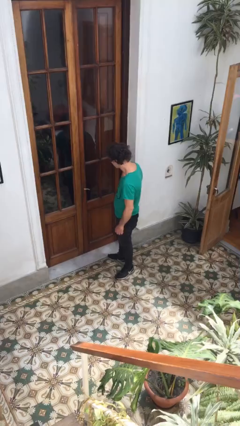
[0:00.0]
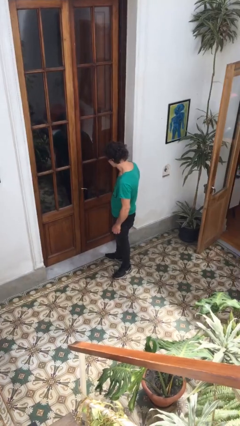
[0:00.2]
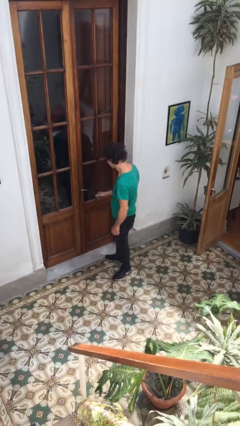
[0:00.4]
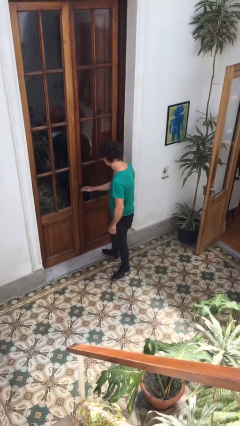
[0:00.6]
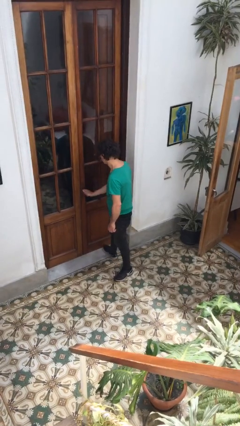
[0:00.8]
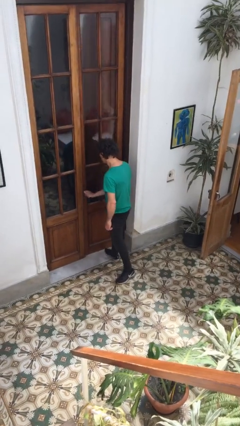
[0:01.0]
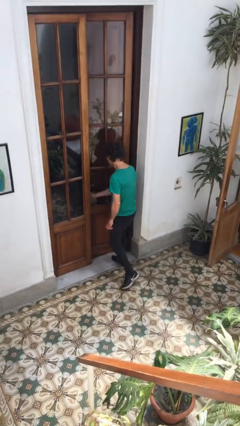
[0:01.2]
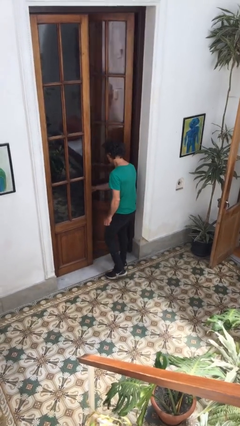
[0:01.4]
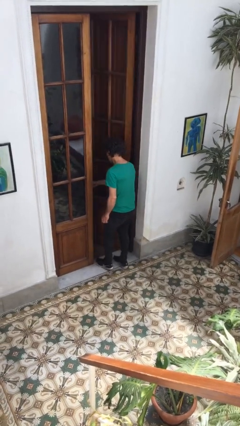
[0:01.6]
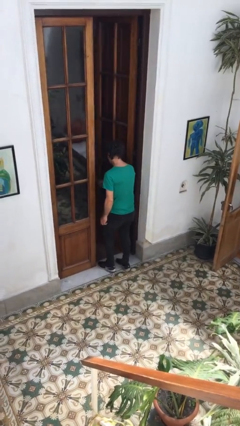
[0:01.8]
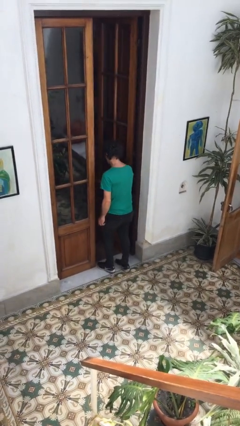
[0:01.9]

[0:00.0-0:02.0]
person opens facility door

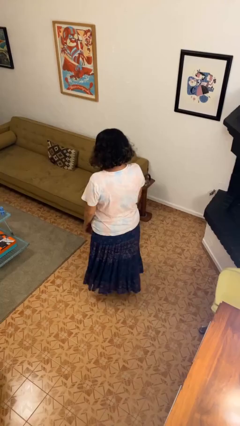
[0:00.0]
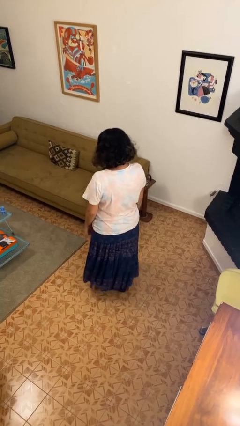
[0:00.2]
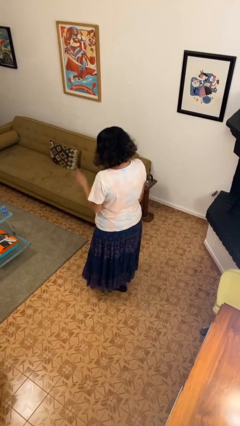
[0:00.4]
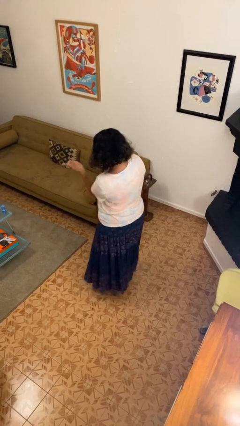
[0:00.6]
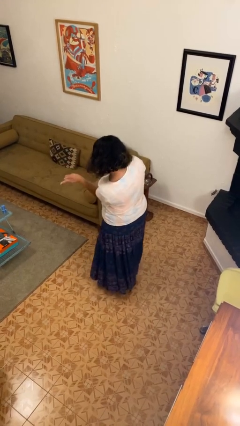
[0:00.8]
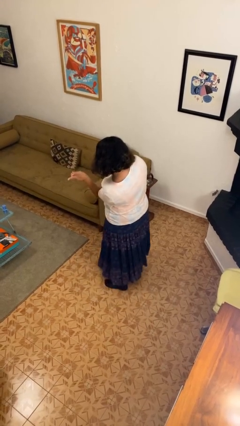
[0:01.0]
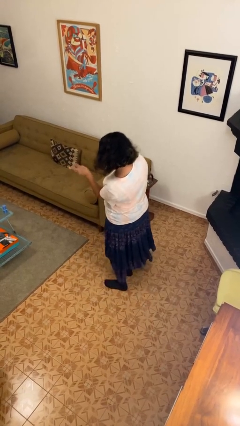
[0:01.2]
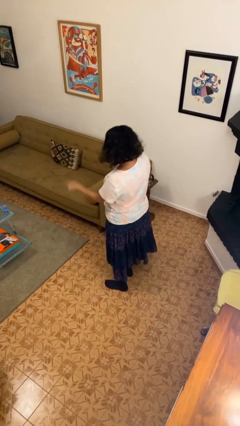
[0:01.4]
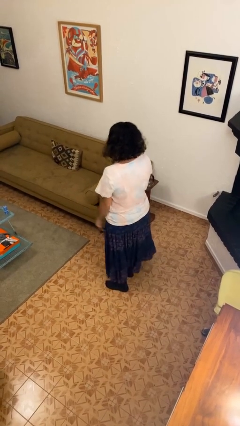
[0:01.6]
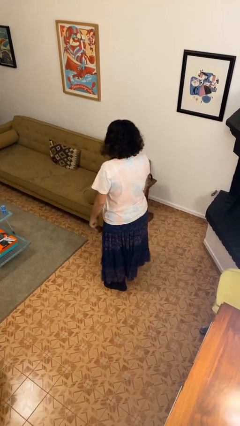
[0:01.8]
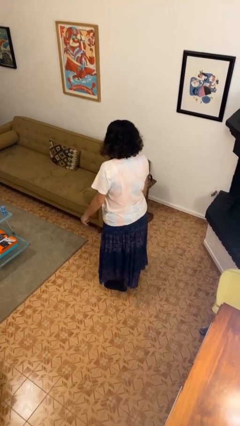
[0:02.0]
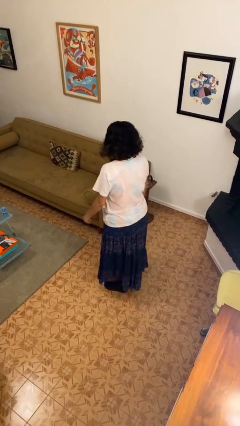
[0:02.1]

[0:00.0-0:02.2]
person gestures peace

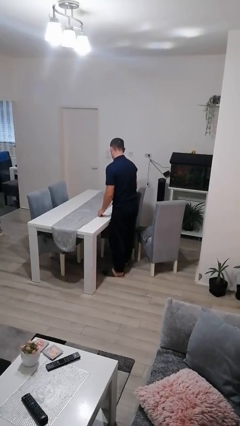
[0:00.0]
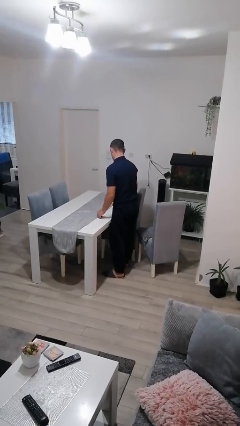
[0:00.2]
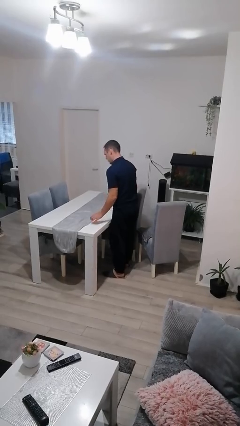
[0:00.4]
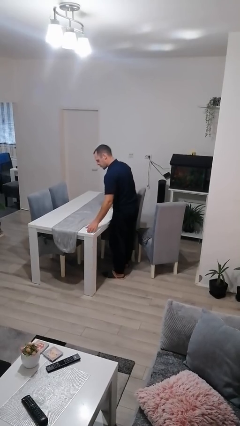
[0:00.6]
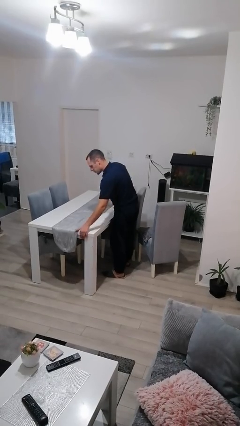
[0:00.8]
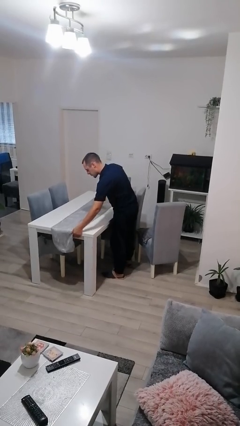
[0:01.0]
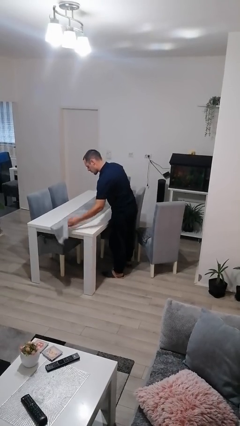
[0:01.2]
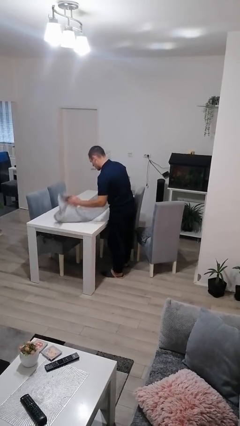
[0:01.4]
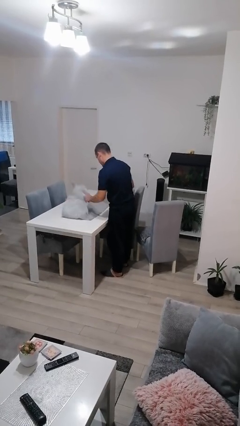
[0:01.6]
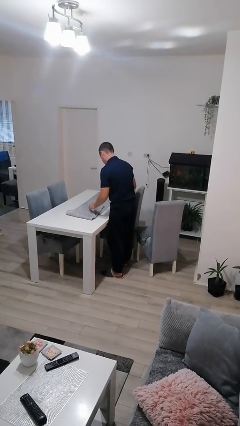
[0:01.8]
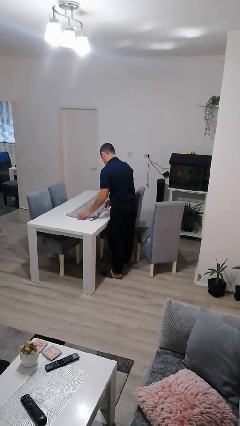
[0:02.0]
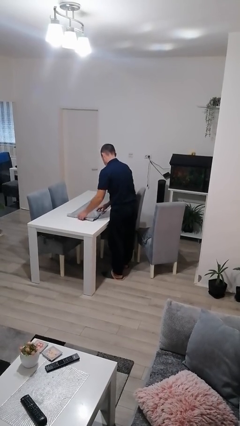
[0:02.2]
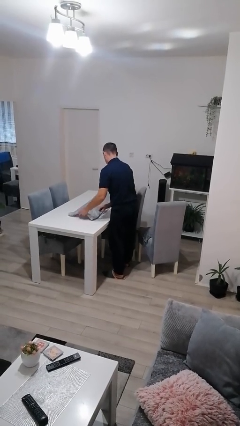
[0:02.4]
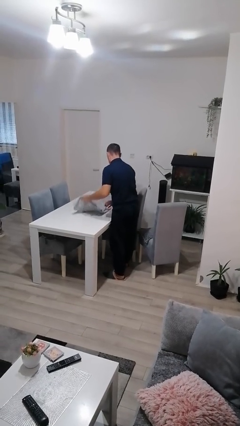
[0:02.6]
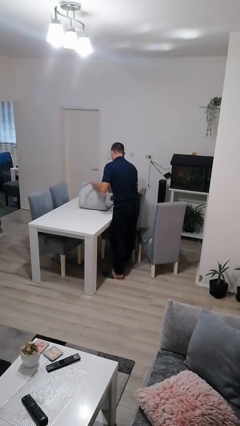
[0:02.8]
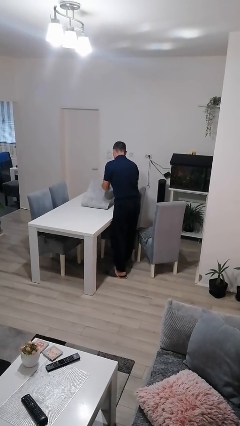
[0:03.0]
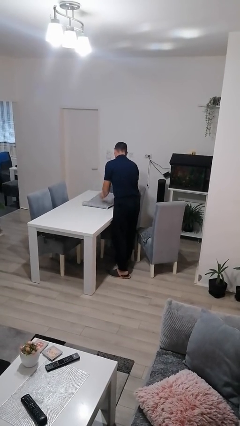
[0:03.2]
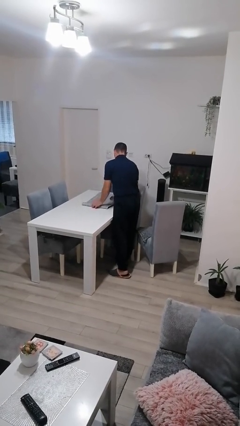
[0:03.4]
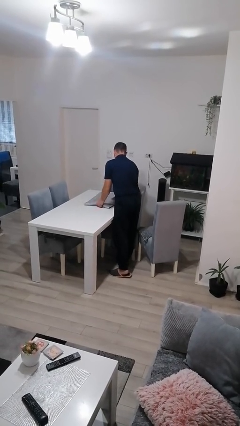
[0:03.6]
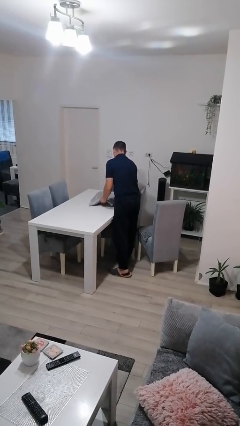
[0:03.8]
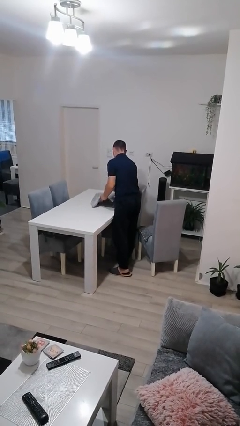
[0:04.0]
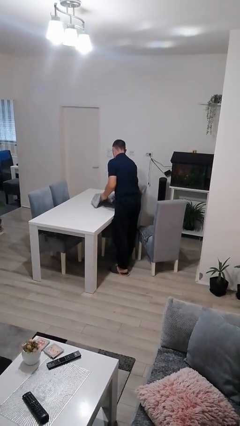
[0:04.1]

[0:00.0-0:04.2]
person folds tablecloth

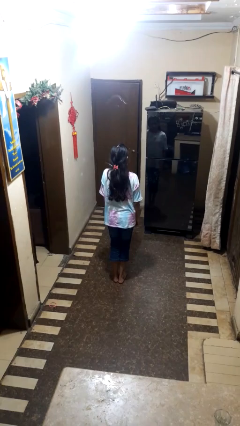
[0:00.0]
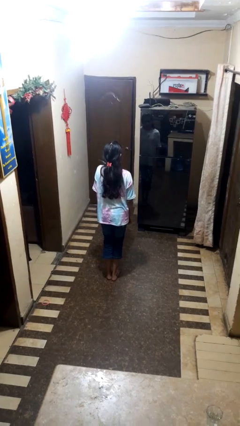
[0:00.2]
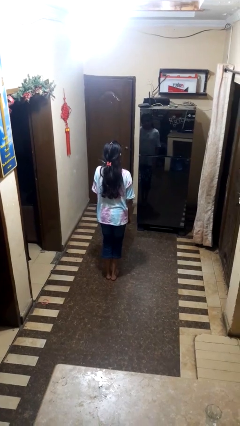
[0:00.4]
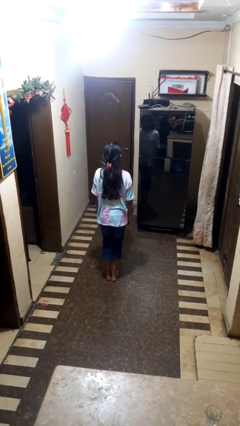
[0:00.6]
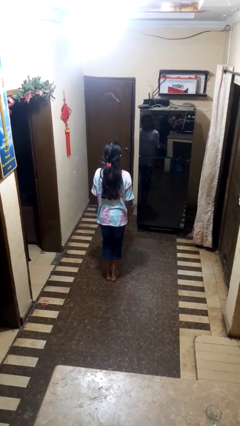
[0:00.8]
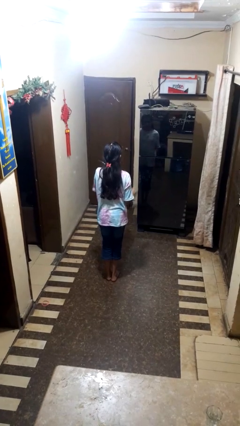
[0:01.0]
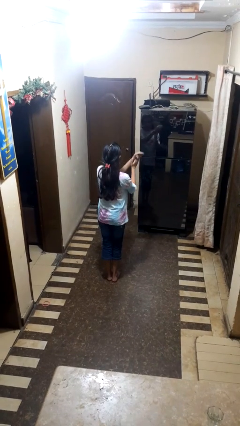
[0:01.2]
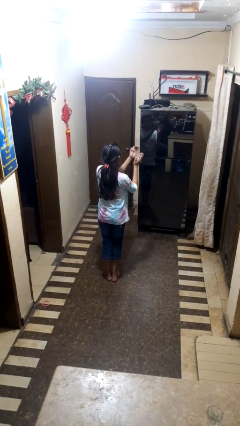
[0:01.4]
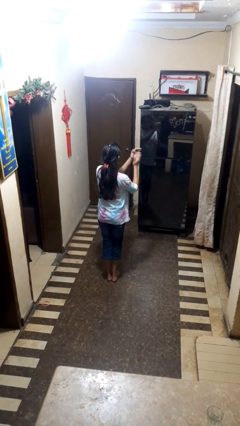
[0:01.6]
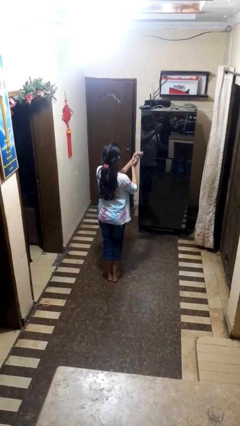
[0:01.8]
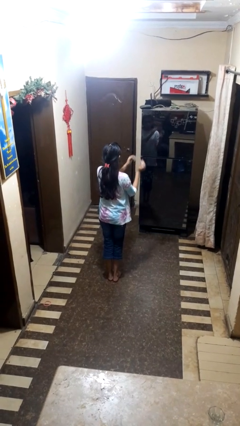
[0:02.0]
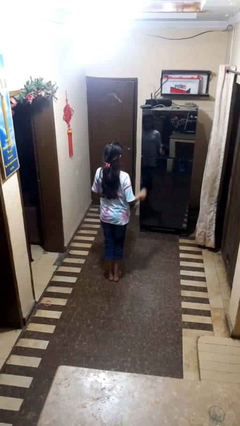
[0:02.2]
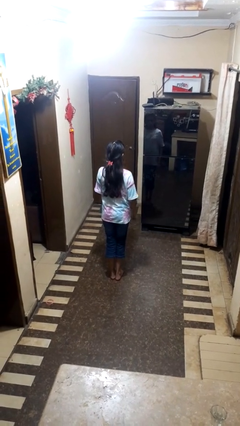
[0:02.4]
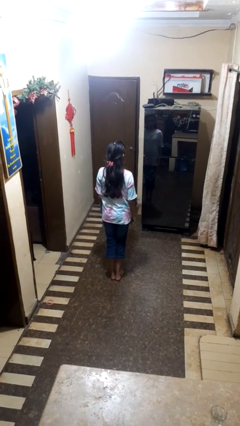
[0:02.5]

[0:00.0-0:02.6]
person claps hands

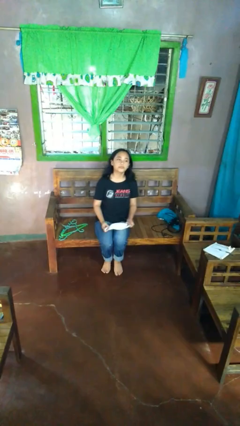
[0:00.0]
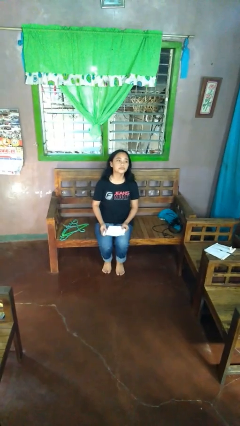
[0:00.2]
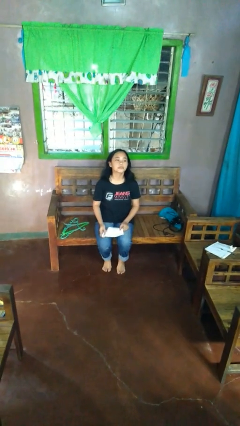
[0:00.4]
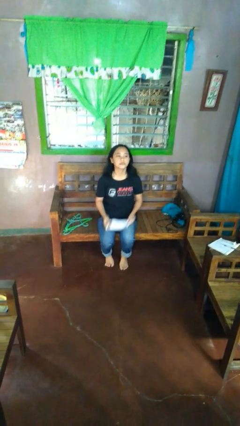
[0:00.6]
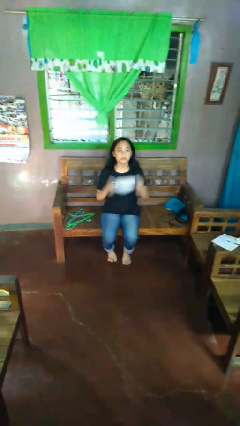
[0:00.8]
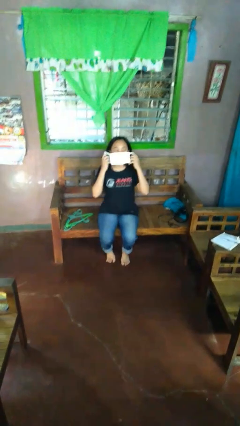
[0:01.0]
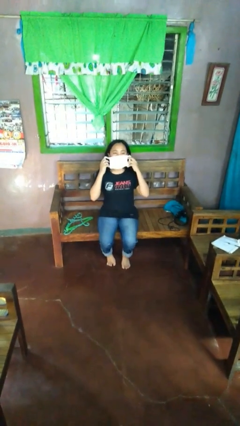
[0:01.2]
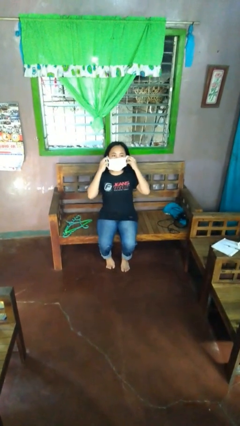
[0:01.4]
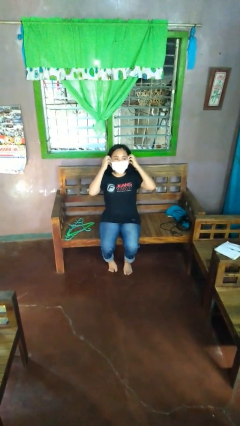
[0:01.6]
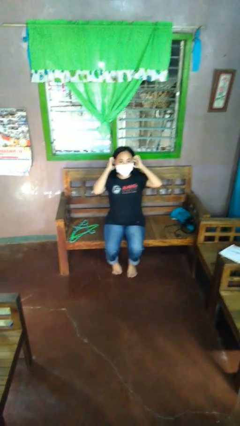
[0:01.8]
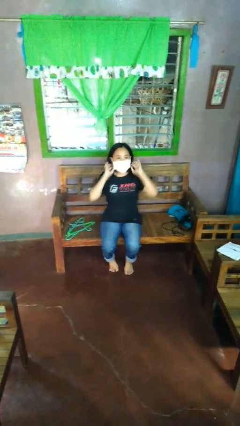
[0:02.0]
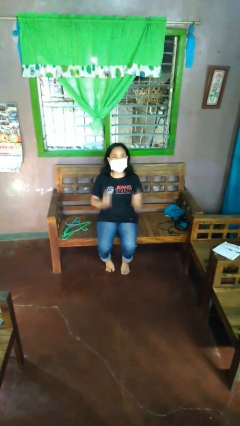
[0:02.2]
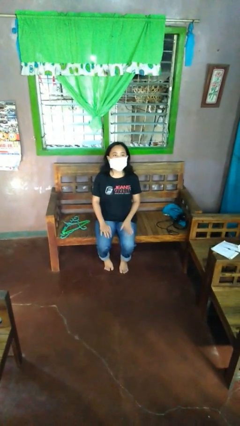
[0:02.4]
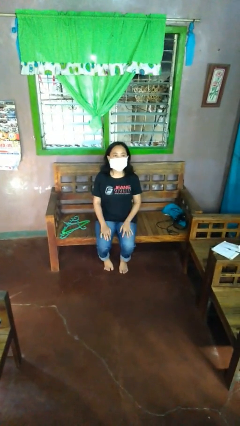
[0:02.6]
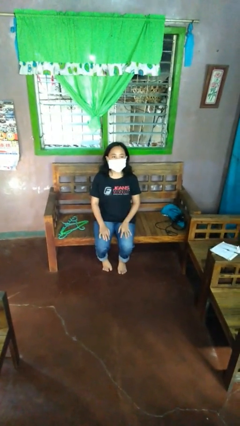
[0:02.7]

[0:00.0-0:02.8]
person puts on facemask

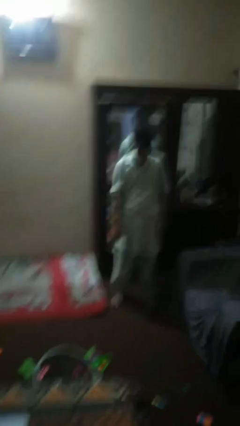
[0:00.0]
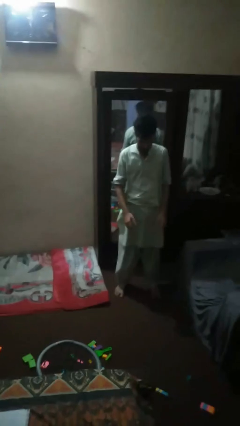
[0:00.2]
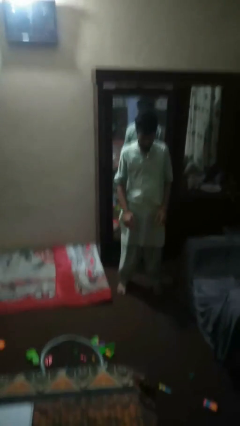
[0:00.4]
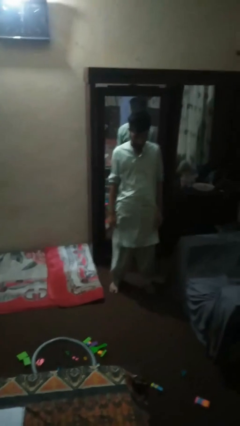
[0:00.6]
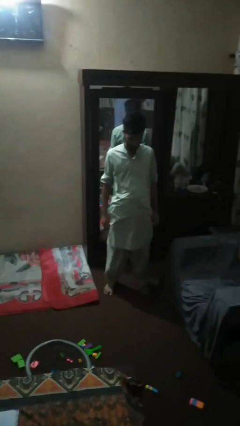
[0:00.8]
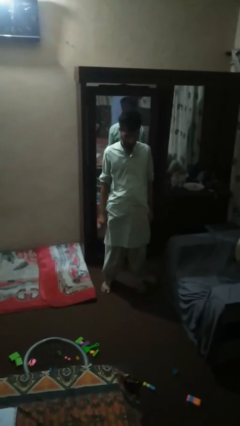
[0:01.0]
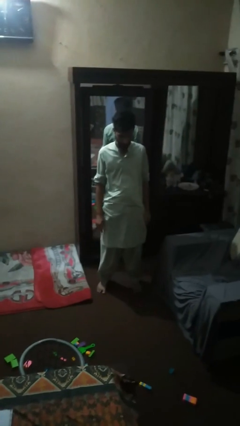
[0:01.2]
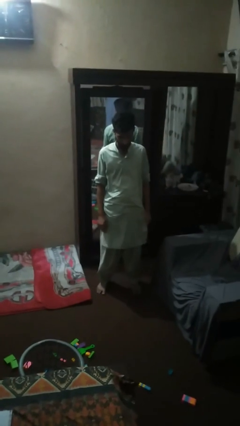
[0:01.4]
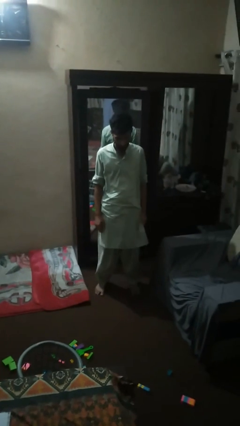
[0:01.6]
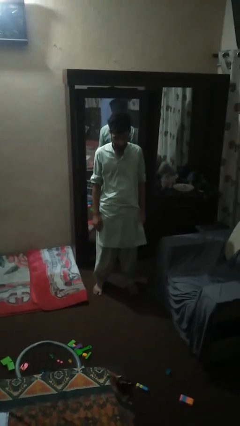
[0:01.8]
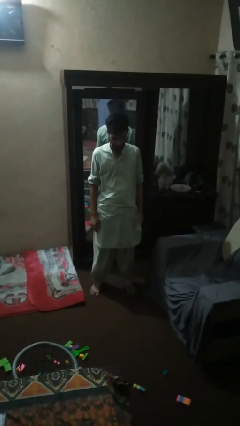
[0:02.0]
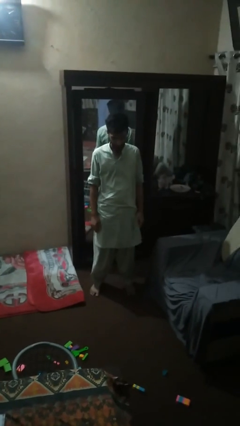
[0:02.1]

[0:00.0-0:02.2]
person stretches back

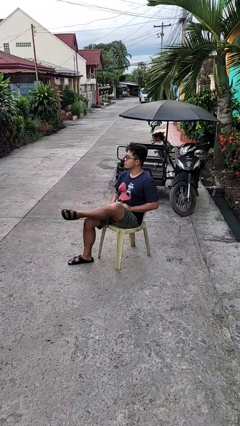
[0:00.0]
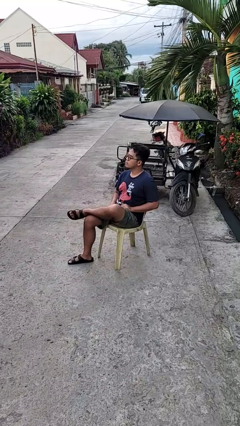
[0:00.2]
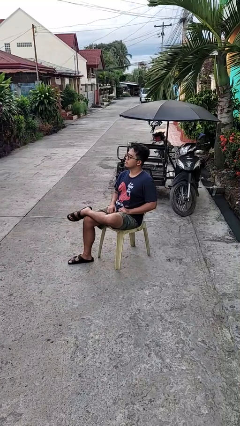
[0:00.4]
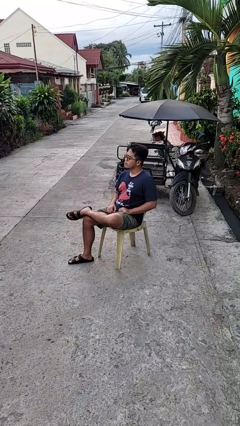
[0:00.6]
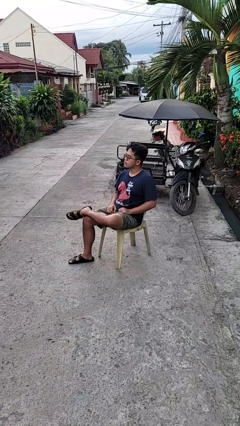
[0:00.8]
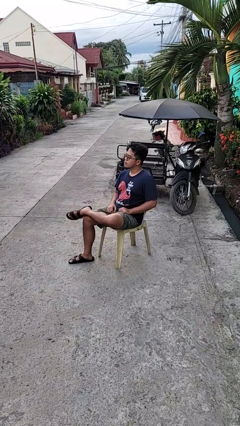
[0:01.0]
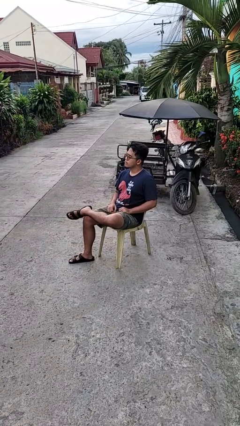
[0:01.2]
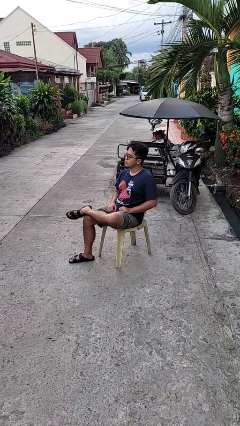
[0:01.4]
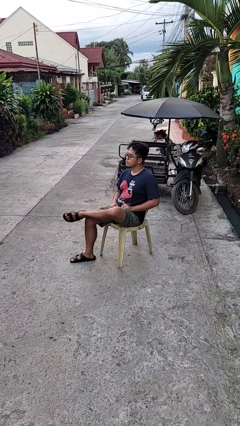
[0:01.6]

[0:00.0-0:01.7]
person crosses legs
